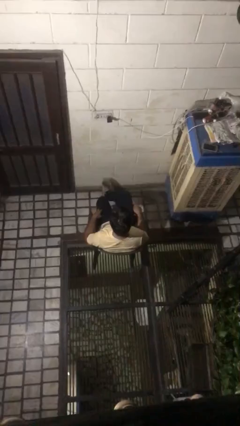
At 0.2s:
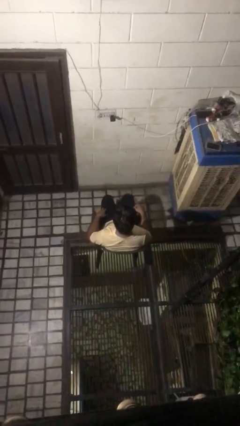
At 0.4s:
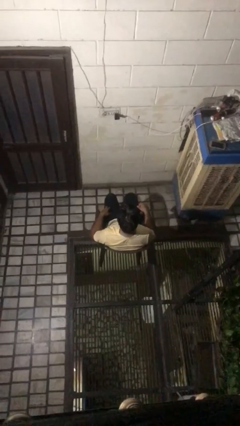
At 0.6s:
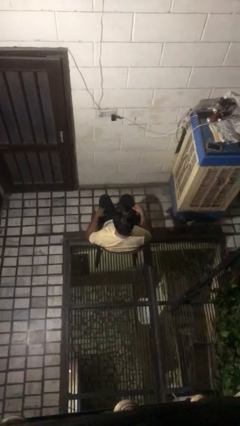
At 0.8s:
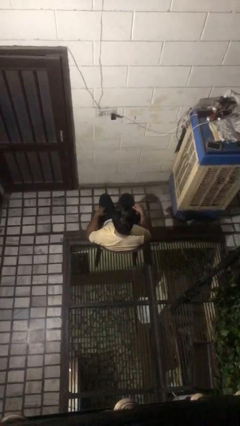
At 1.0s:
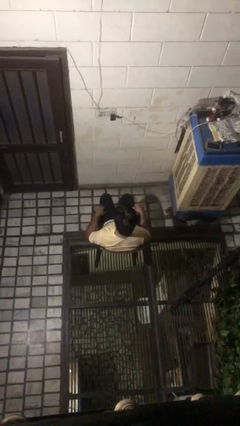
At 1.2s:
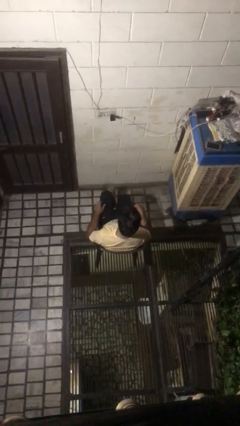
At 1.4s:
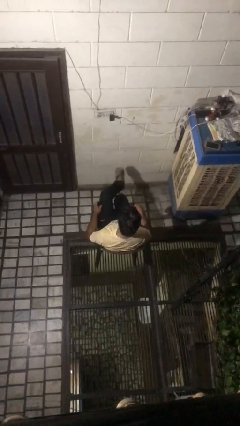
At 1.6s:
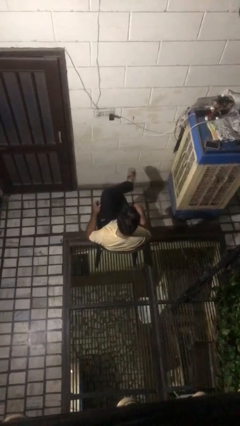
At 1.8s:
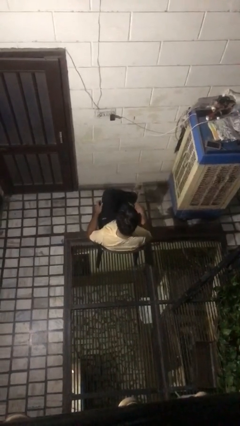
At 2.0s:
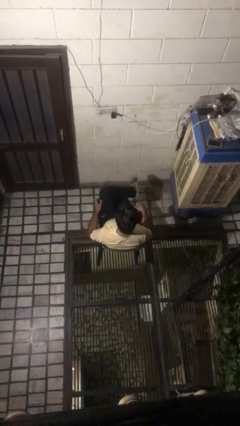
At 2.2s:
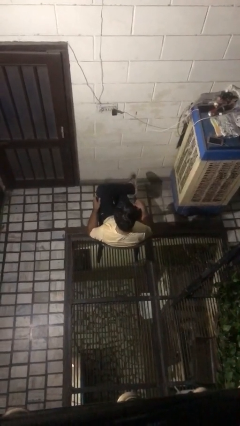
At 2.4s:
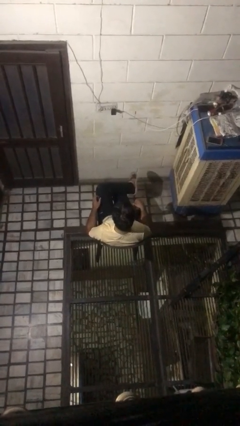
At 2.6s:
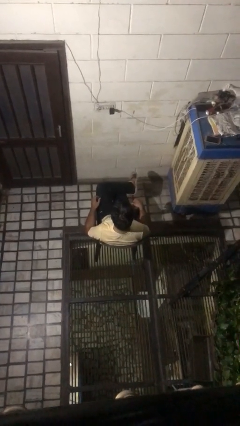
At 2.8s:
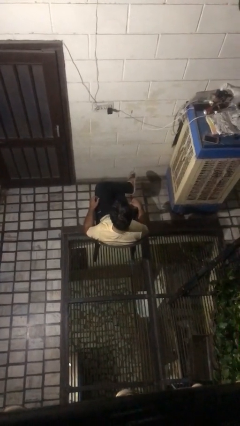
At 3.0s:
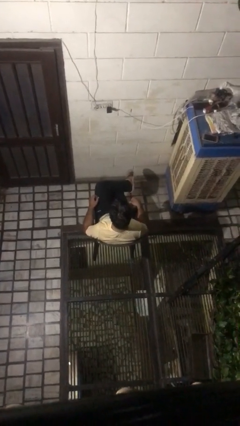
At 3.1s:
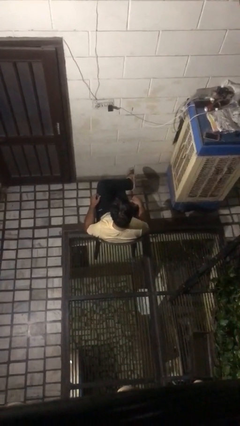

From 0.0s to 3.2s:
person crosses legs

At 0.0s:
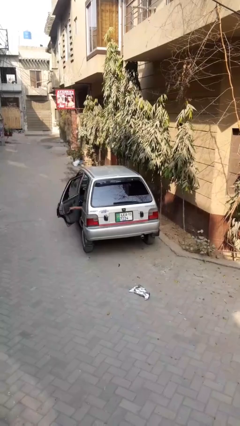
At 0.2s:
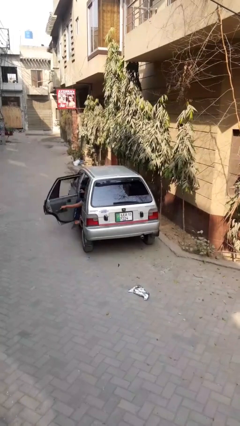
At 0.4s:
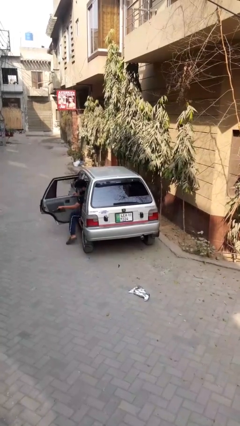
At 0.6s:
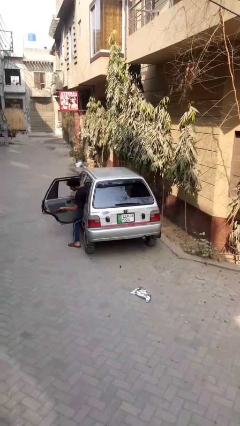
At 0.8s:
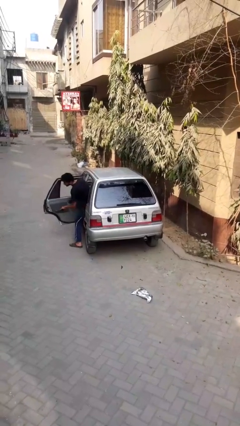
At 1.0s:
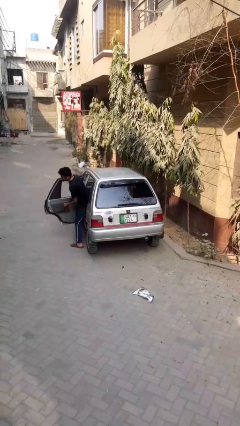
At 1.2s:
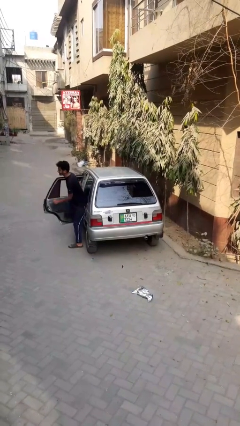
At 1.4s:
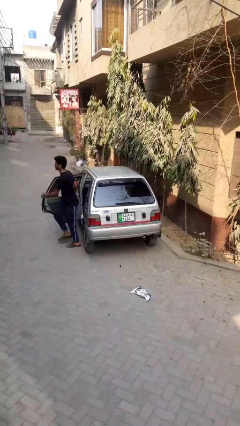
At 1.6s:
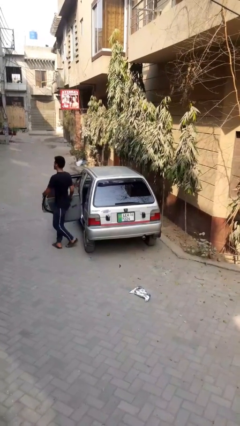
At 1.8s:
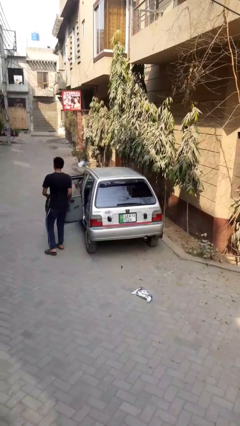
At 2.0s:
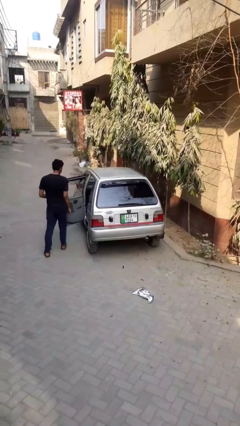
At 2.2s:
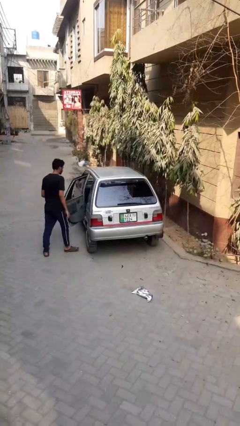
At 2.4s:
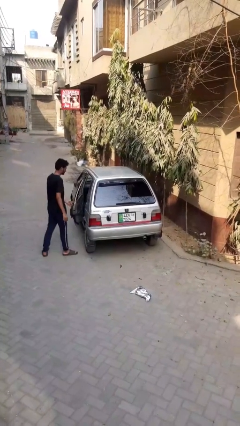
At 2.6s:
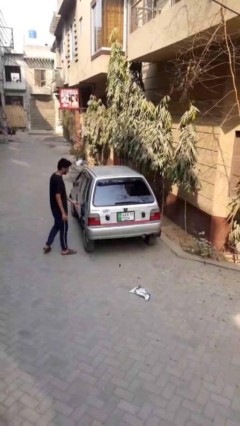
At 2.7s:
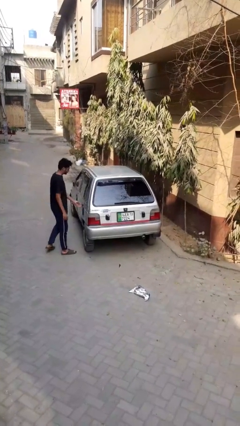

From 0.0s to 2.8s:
car drops off person

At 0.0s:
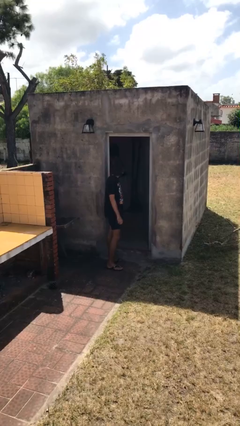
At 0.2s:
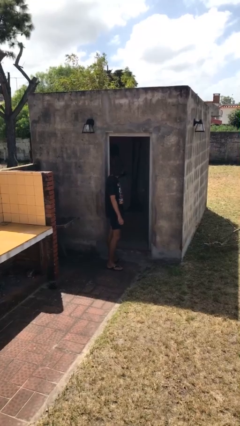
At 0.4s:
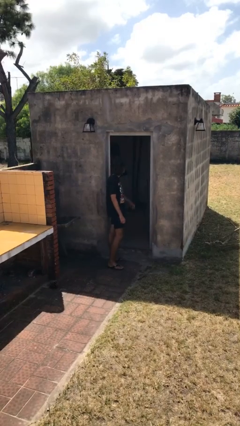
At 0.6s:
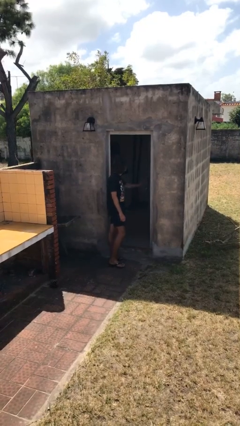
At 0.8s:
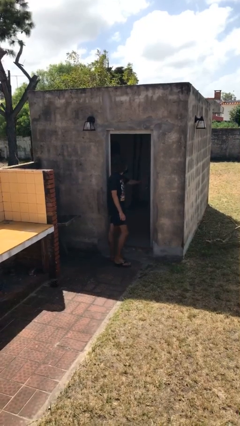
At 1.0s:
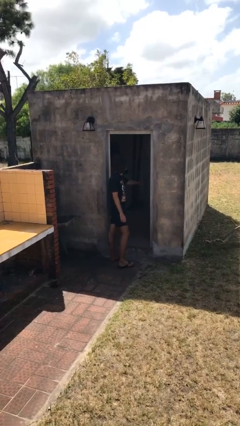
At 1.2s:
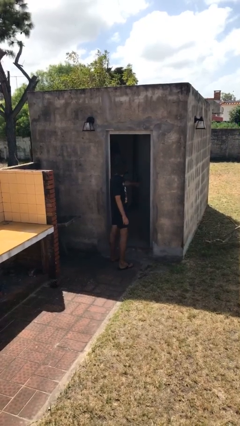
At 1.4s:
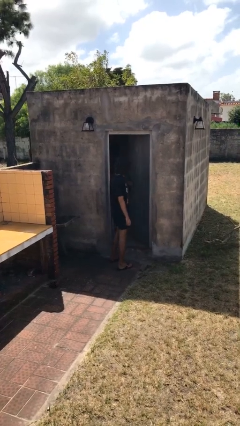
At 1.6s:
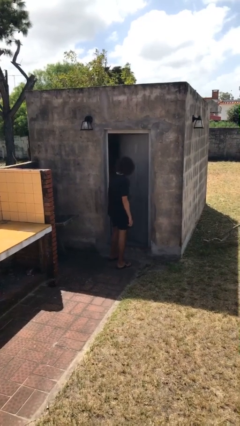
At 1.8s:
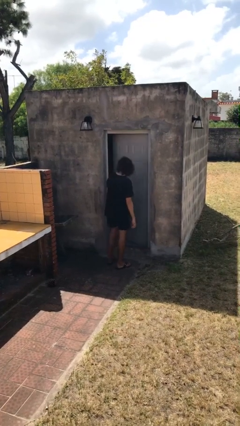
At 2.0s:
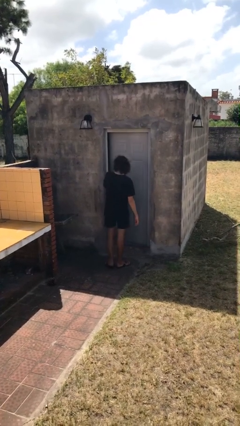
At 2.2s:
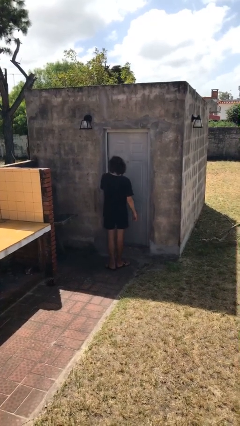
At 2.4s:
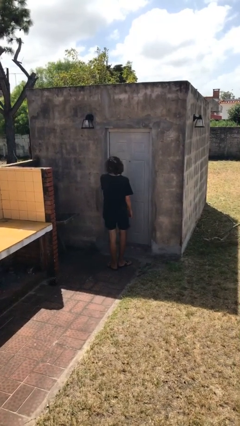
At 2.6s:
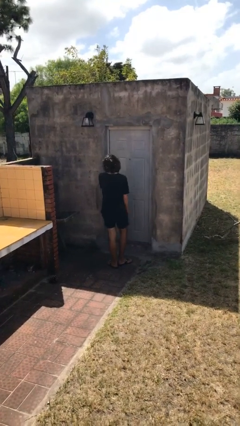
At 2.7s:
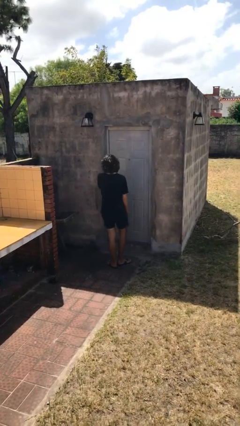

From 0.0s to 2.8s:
person closes facility door

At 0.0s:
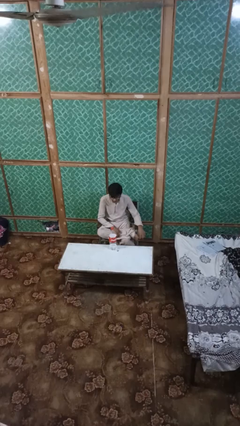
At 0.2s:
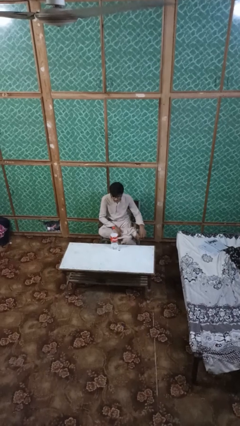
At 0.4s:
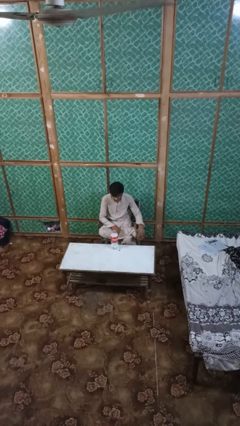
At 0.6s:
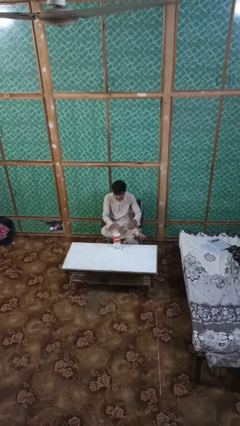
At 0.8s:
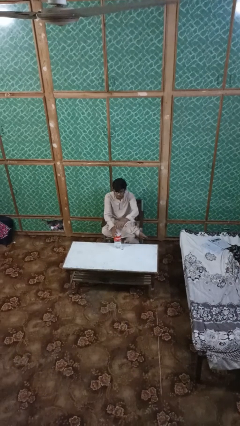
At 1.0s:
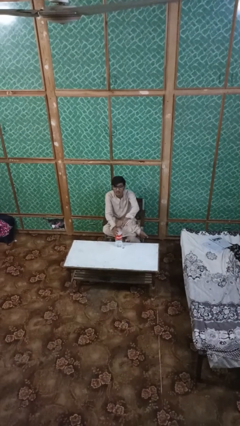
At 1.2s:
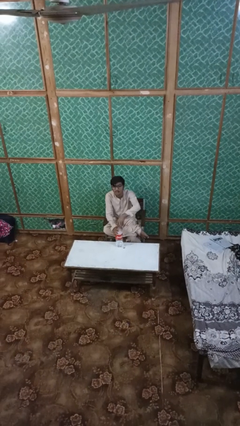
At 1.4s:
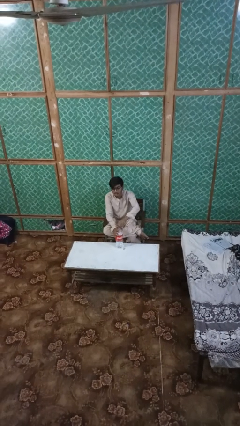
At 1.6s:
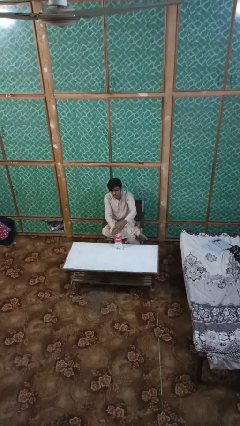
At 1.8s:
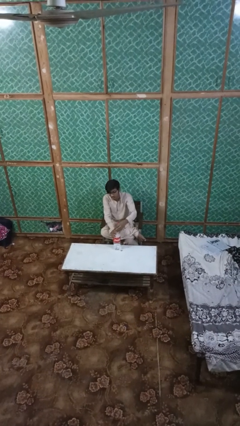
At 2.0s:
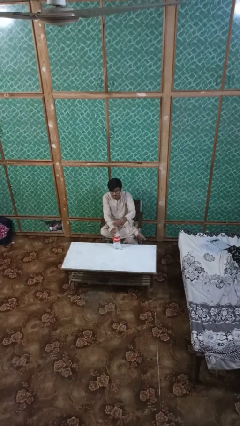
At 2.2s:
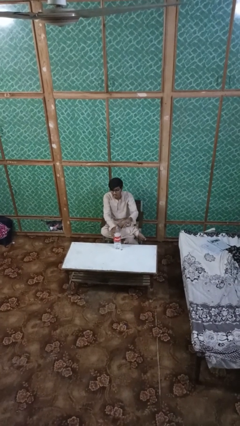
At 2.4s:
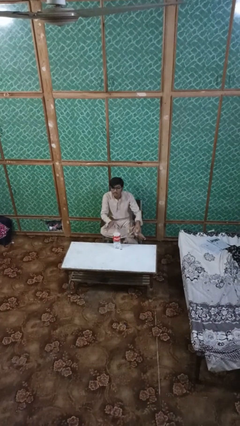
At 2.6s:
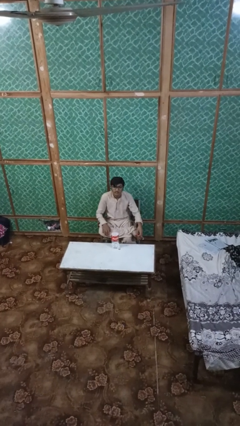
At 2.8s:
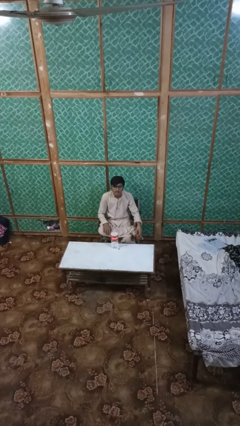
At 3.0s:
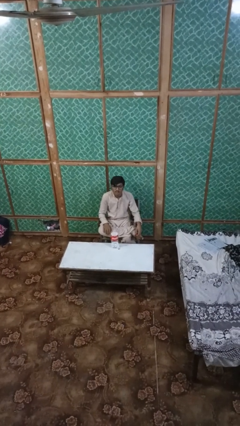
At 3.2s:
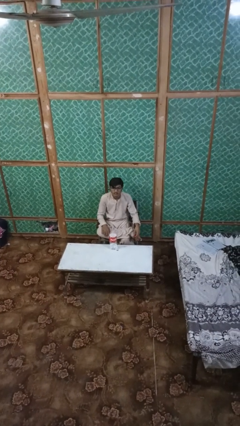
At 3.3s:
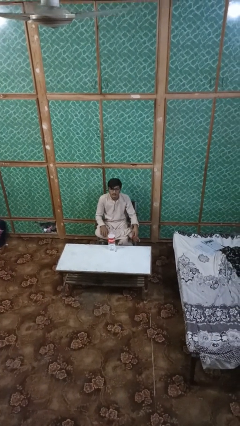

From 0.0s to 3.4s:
person unscrews lid from bottle

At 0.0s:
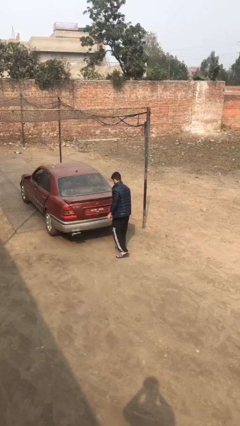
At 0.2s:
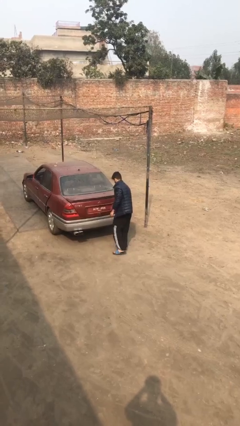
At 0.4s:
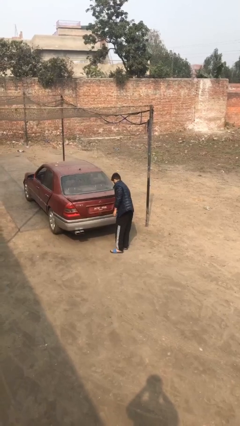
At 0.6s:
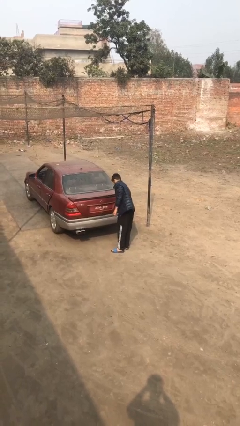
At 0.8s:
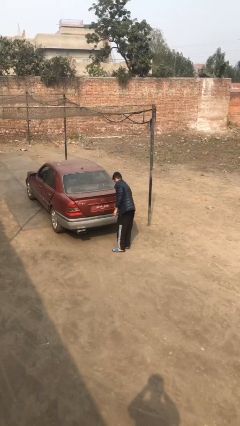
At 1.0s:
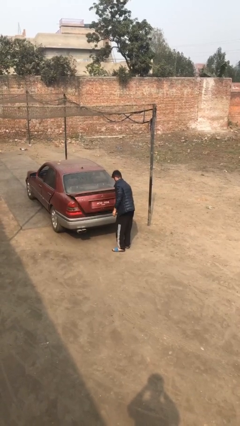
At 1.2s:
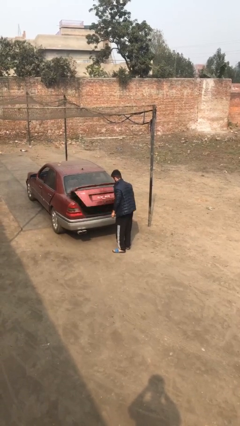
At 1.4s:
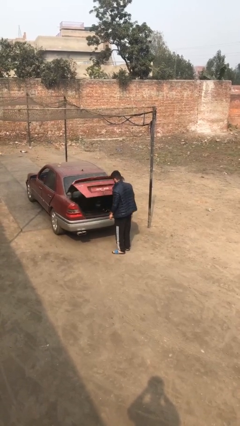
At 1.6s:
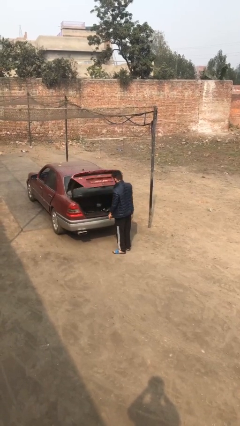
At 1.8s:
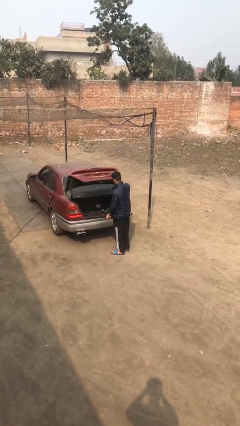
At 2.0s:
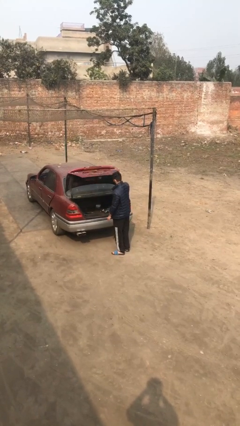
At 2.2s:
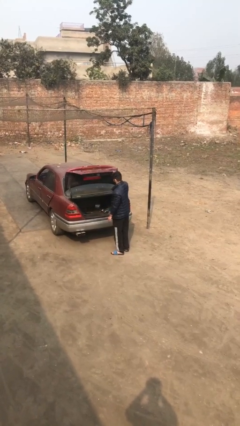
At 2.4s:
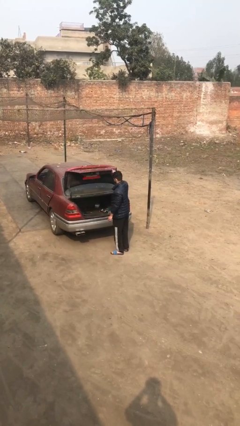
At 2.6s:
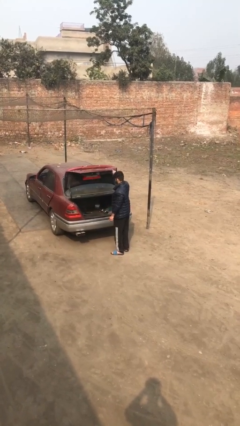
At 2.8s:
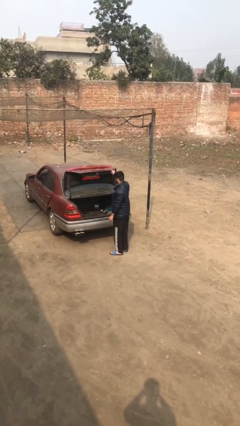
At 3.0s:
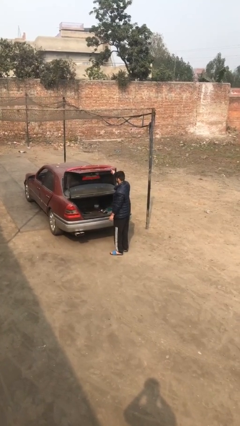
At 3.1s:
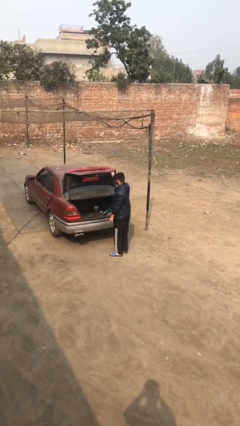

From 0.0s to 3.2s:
person opens car trunk

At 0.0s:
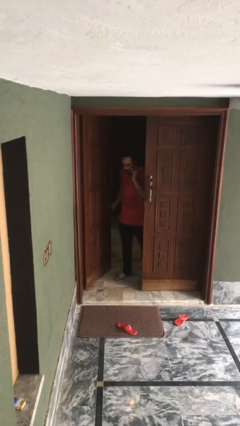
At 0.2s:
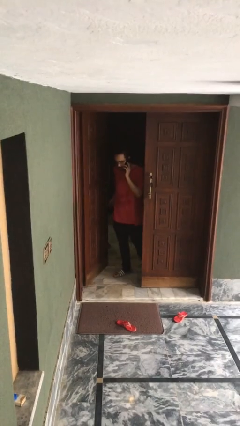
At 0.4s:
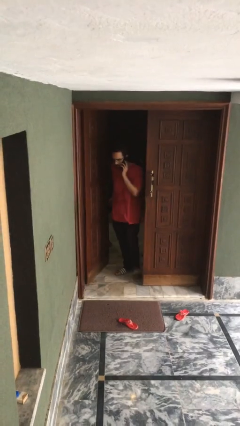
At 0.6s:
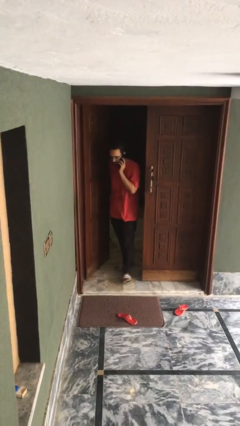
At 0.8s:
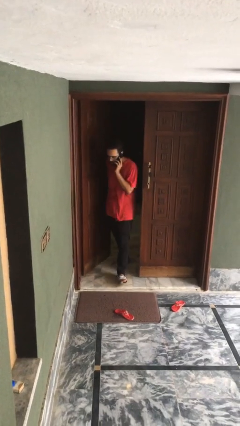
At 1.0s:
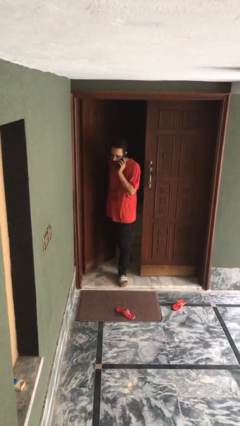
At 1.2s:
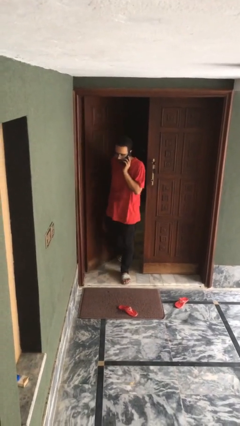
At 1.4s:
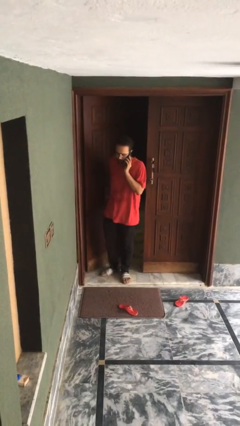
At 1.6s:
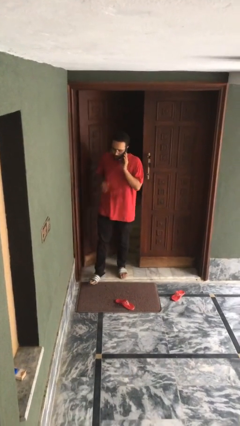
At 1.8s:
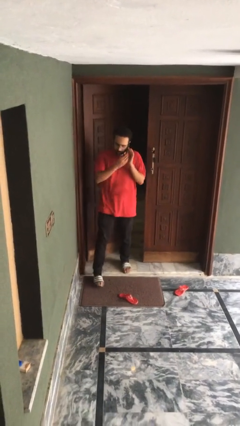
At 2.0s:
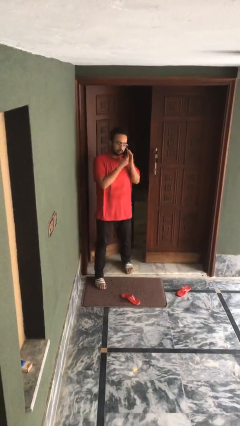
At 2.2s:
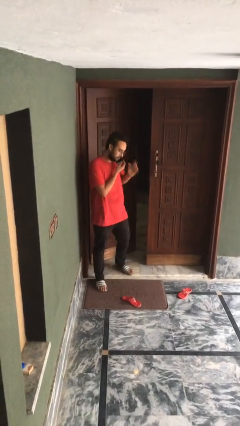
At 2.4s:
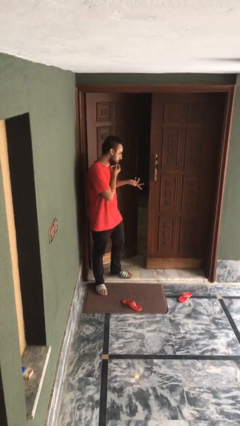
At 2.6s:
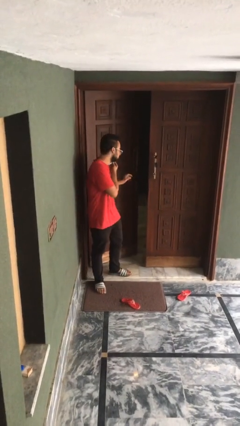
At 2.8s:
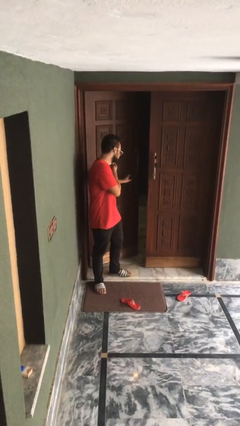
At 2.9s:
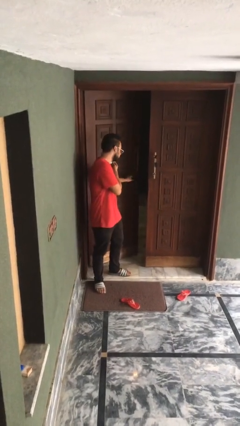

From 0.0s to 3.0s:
person enters scene through structure
